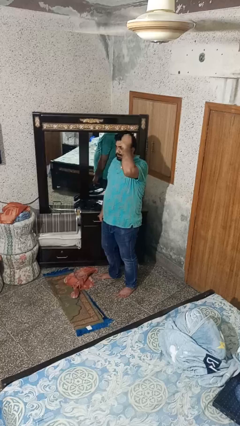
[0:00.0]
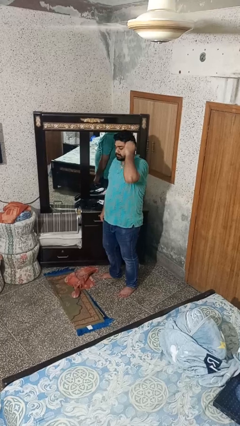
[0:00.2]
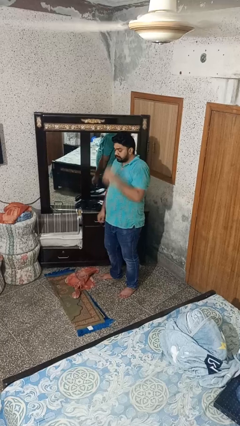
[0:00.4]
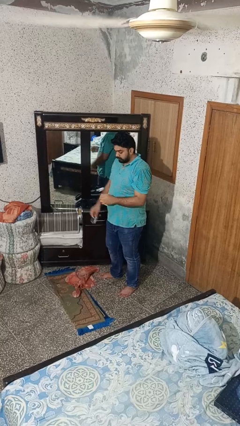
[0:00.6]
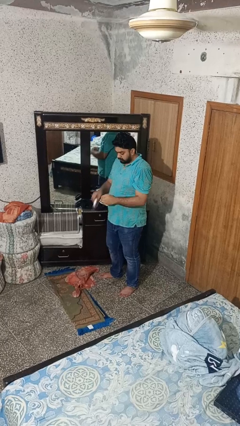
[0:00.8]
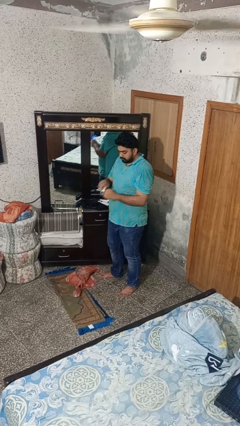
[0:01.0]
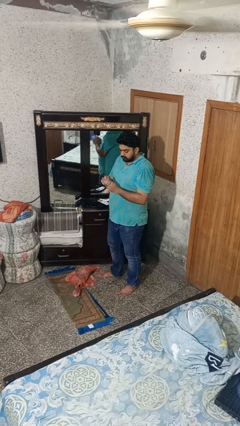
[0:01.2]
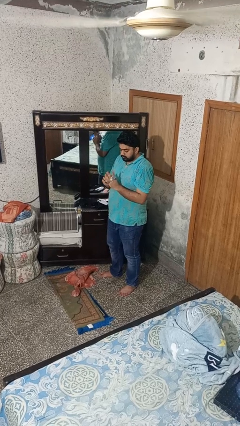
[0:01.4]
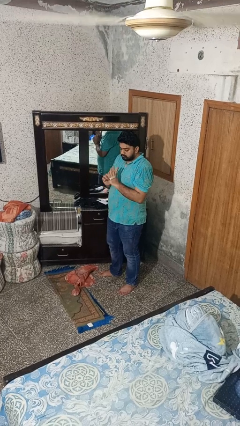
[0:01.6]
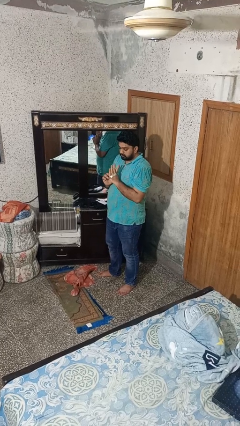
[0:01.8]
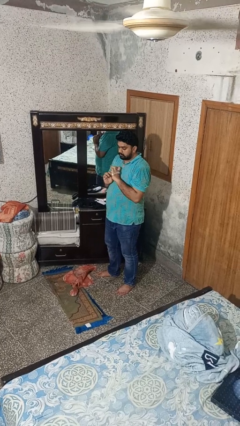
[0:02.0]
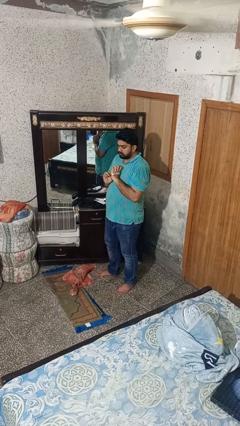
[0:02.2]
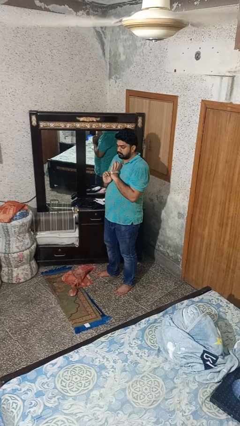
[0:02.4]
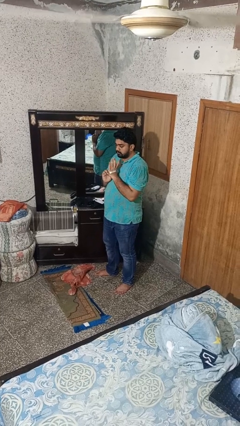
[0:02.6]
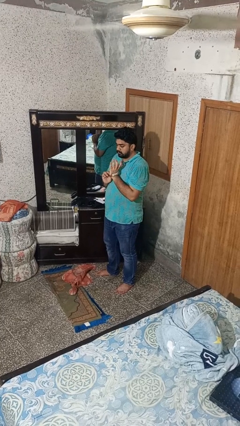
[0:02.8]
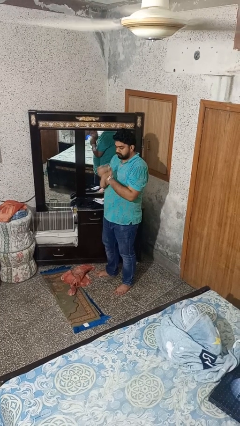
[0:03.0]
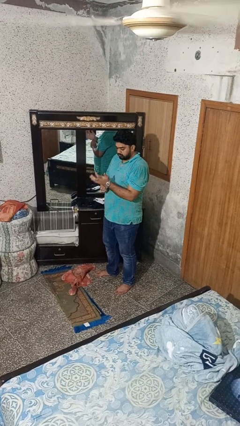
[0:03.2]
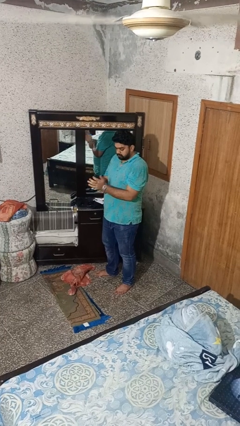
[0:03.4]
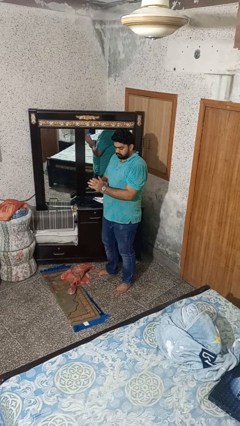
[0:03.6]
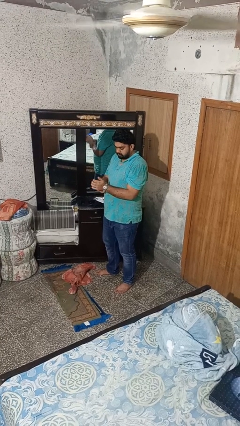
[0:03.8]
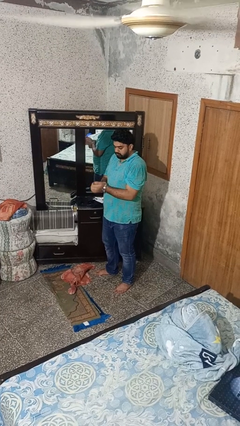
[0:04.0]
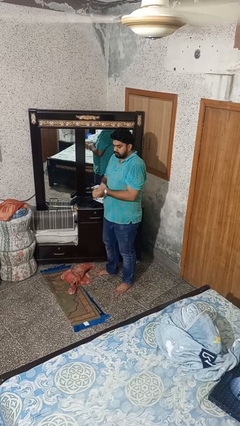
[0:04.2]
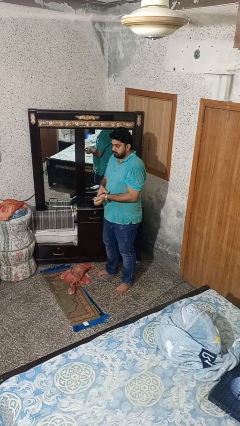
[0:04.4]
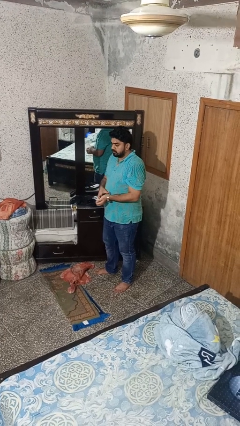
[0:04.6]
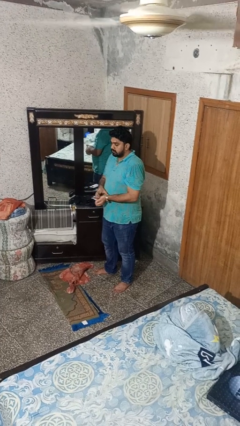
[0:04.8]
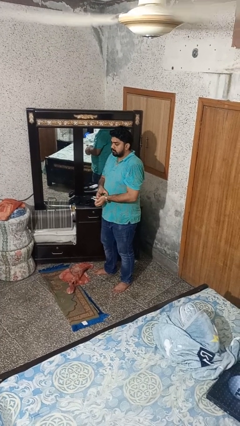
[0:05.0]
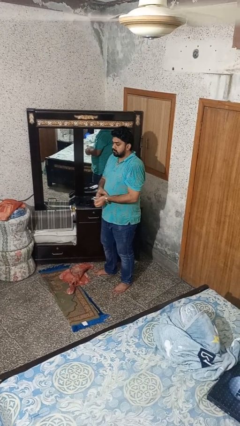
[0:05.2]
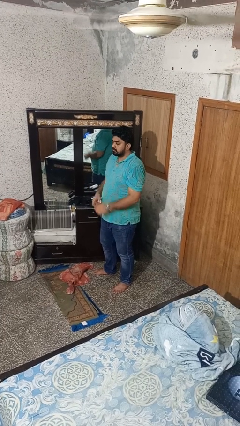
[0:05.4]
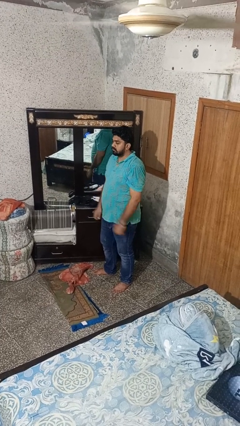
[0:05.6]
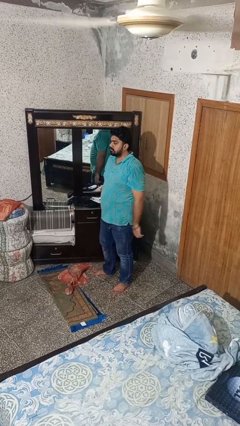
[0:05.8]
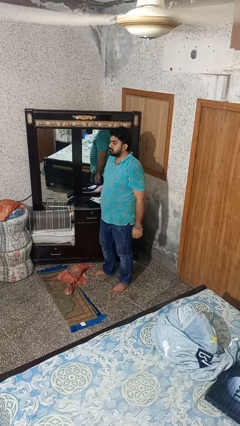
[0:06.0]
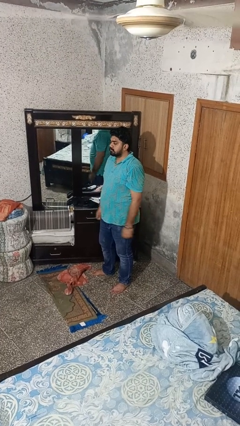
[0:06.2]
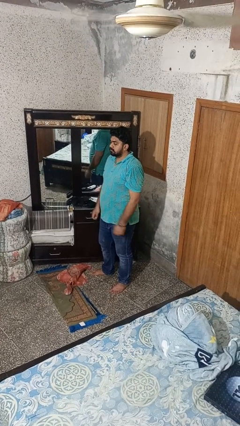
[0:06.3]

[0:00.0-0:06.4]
person puts on wristwatch

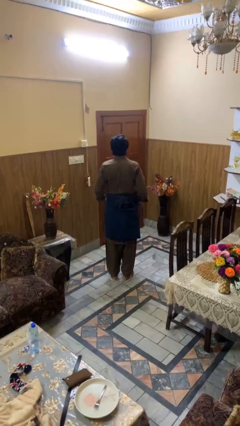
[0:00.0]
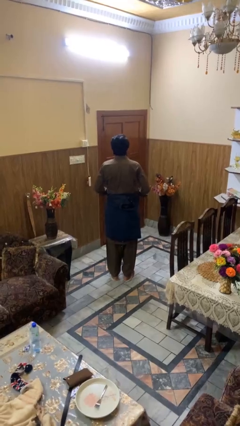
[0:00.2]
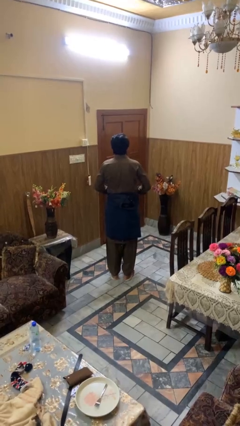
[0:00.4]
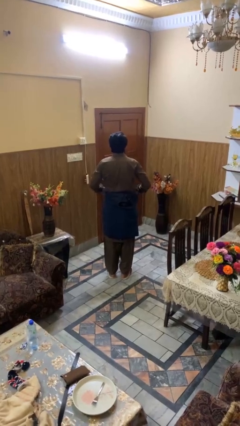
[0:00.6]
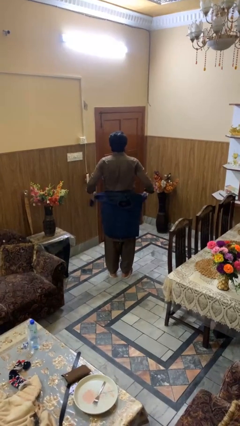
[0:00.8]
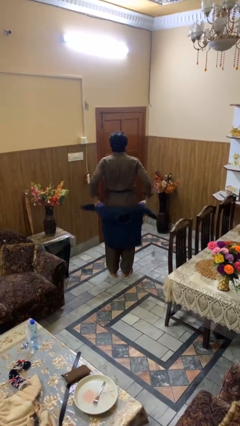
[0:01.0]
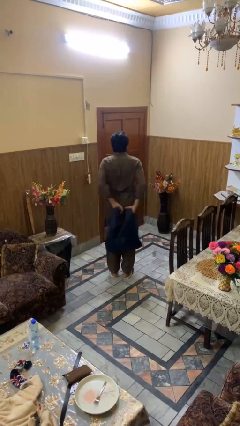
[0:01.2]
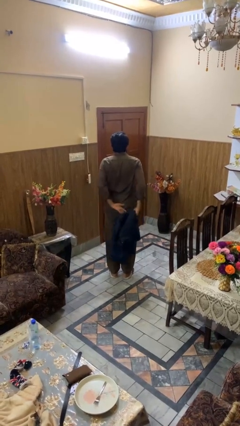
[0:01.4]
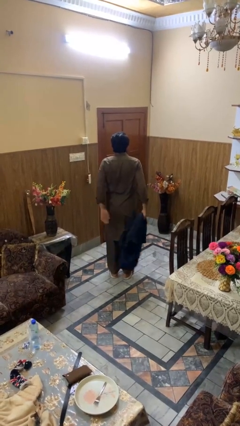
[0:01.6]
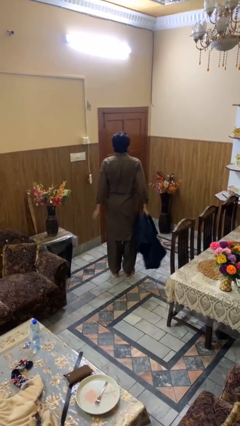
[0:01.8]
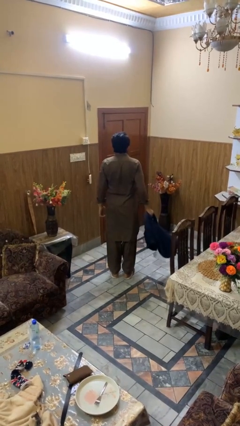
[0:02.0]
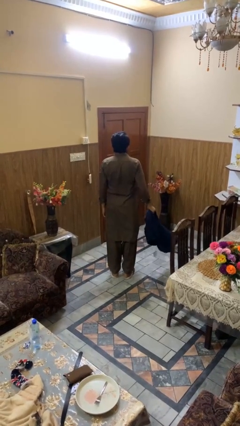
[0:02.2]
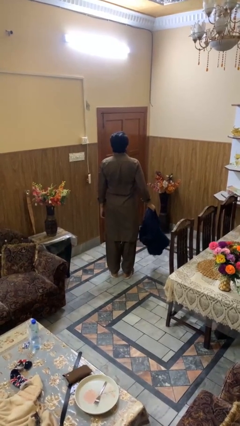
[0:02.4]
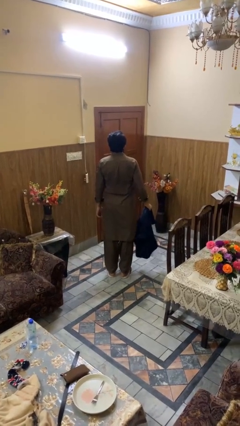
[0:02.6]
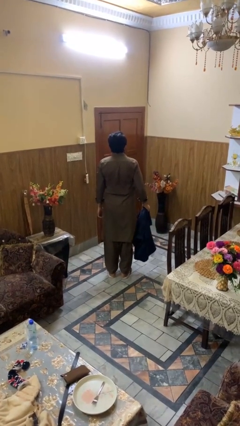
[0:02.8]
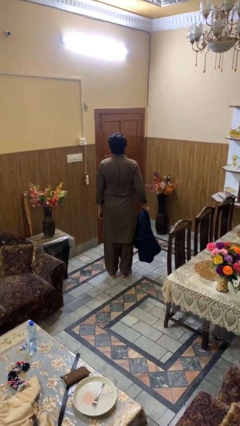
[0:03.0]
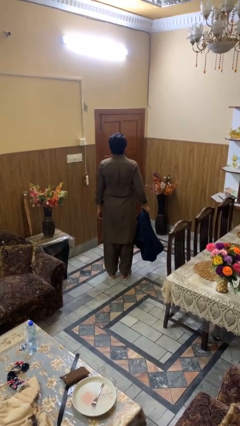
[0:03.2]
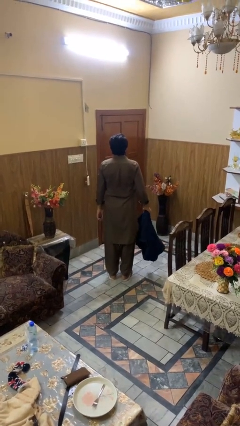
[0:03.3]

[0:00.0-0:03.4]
person unties jacket around waist

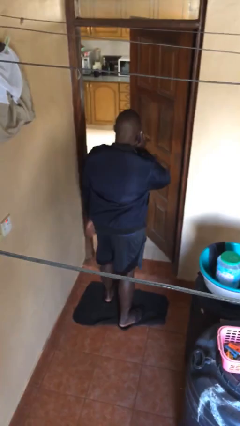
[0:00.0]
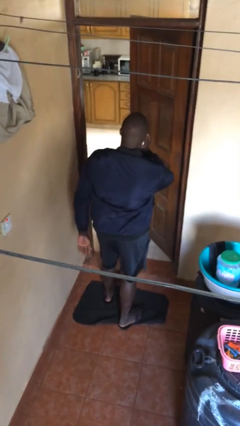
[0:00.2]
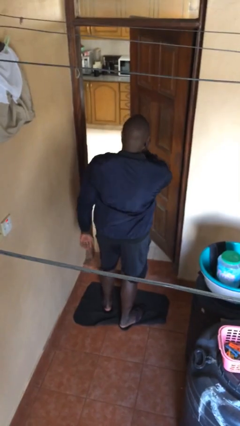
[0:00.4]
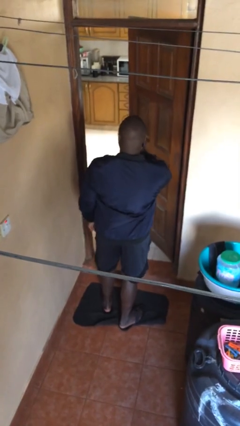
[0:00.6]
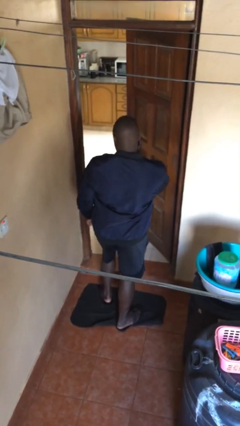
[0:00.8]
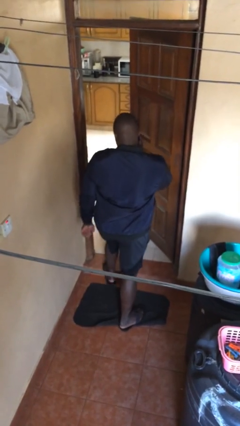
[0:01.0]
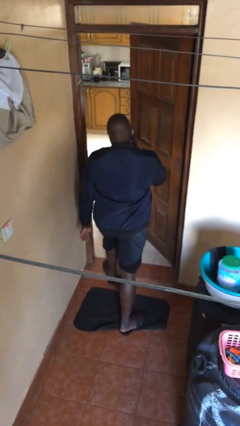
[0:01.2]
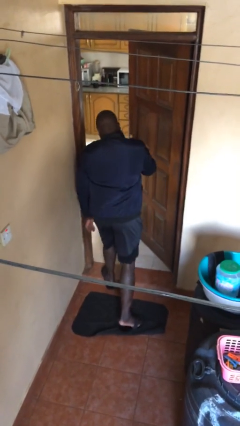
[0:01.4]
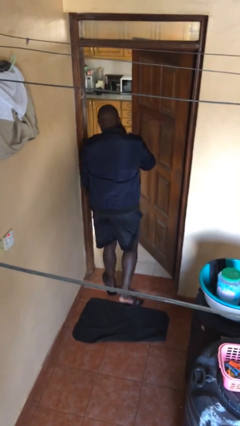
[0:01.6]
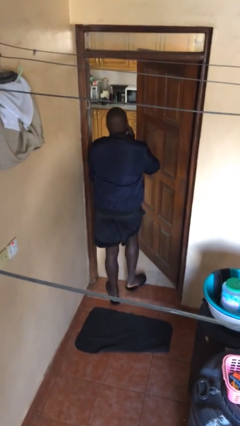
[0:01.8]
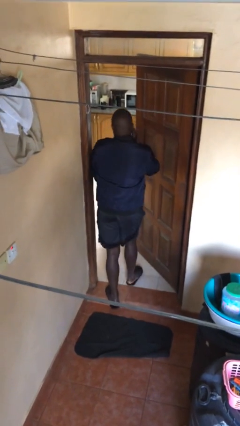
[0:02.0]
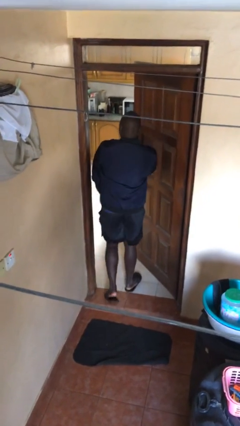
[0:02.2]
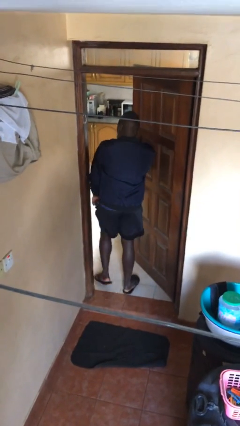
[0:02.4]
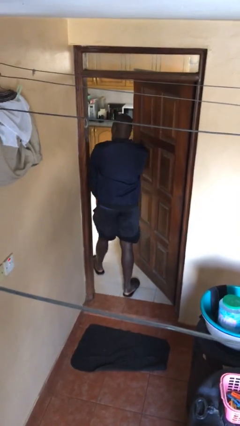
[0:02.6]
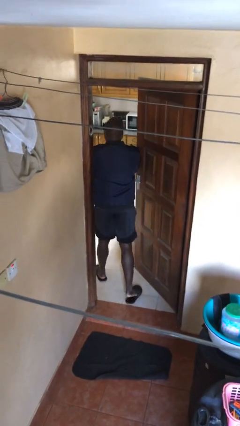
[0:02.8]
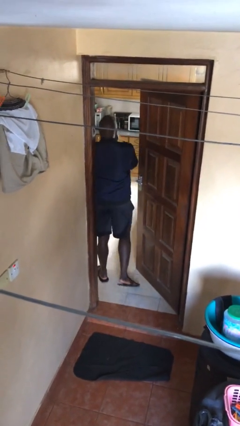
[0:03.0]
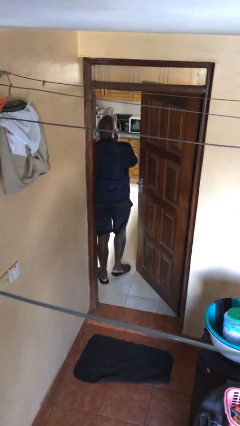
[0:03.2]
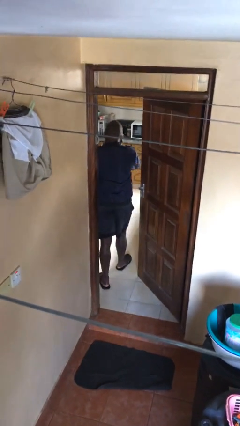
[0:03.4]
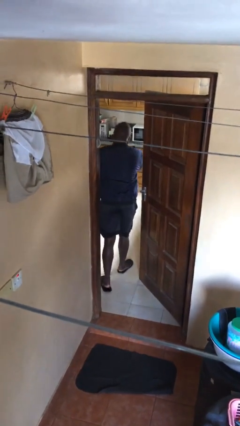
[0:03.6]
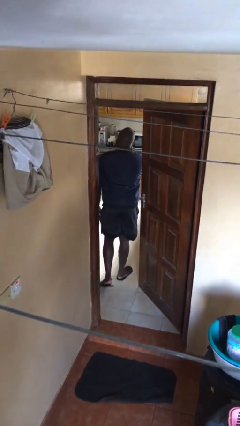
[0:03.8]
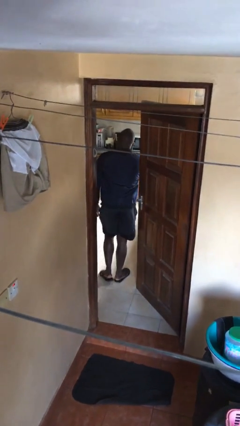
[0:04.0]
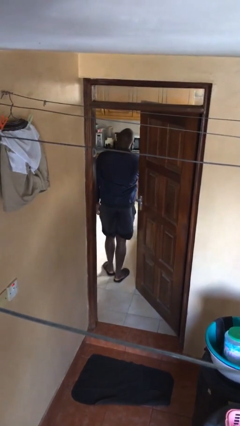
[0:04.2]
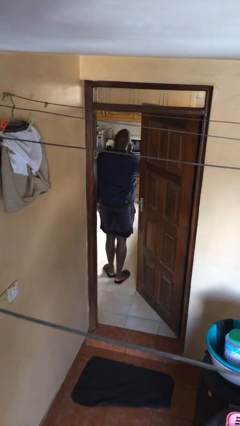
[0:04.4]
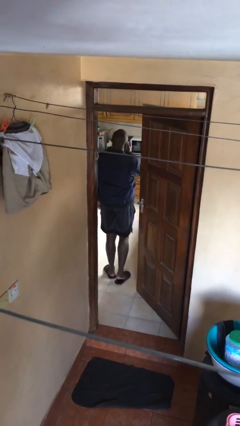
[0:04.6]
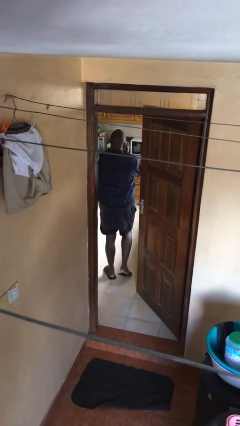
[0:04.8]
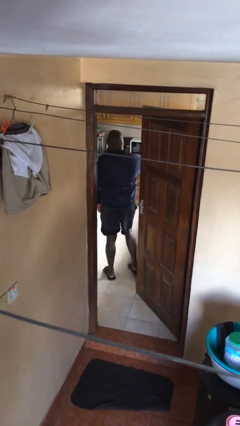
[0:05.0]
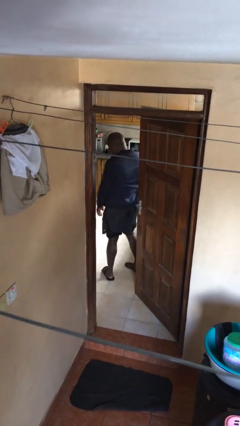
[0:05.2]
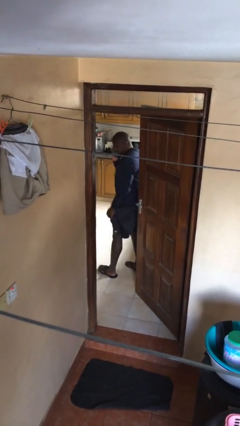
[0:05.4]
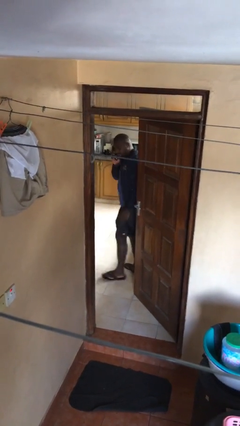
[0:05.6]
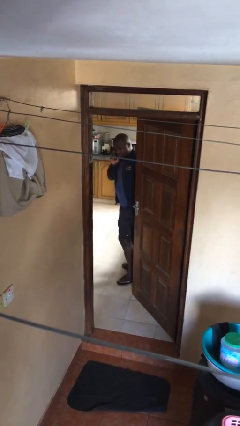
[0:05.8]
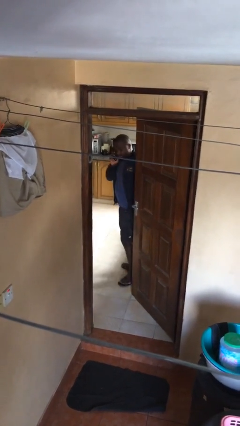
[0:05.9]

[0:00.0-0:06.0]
person exits scene through structure

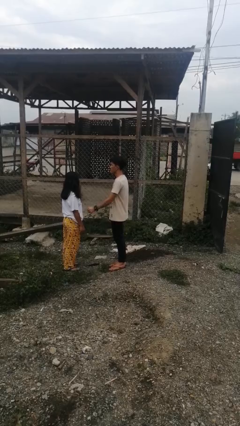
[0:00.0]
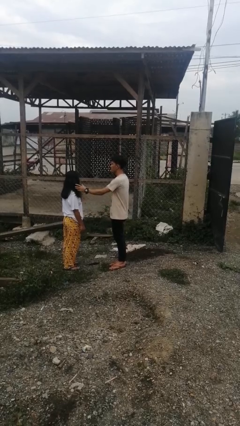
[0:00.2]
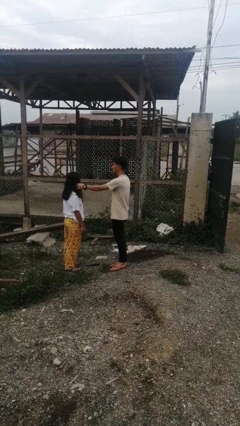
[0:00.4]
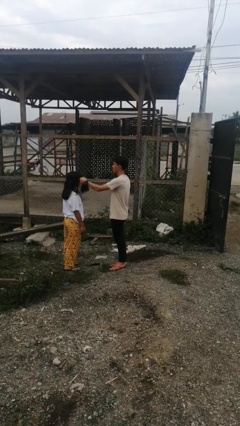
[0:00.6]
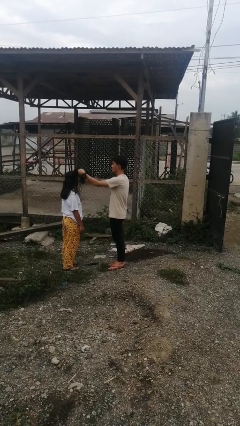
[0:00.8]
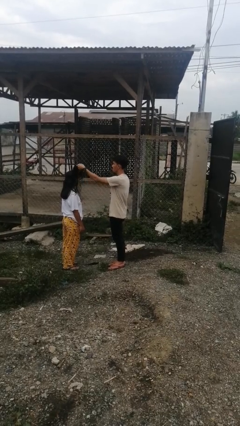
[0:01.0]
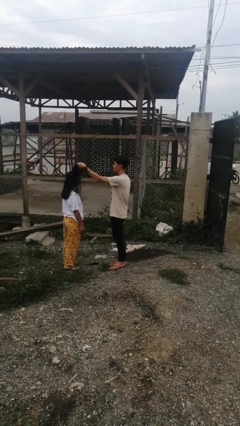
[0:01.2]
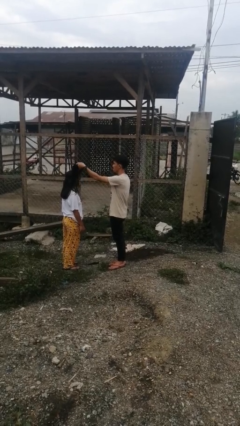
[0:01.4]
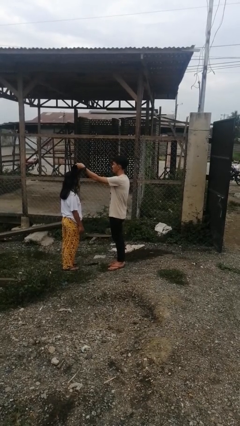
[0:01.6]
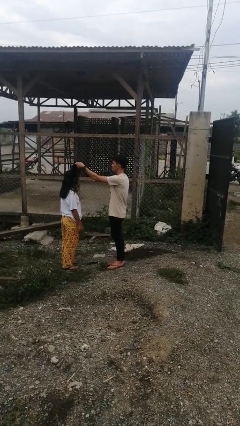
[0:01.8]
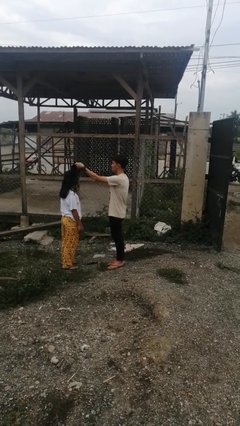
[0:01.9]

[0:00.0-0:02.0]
person grabs person by hair
